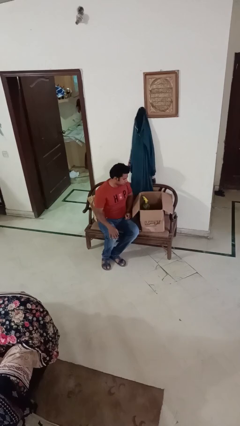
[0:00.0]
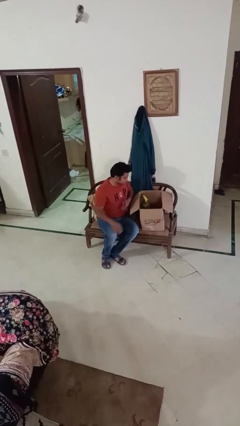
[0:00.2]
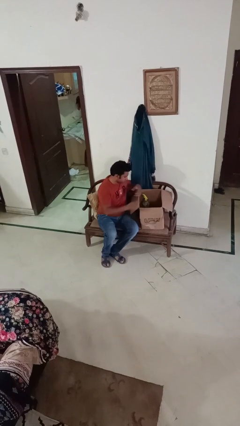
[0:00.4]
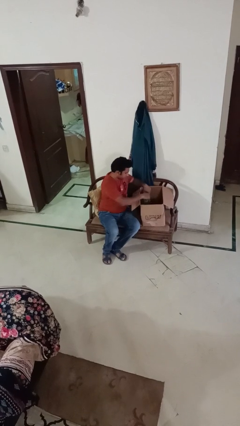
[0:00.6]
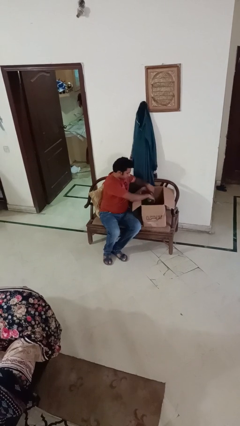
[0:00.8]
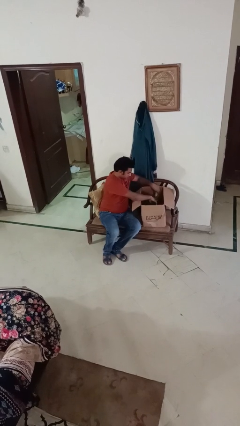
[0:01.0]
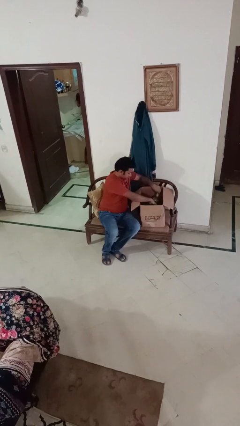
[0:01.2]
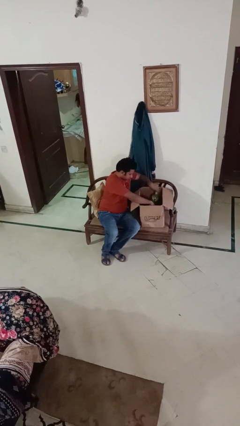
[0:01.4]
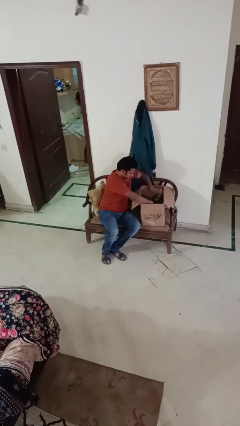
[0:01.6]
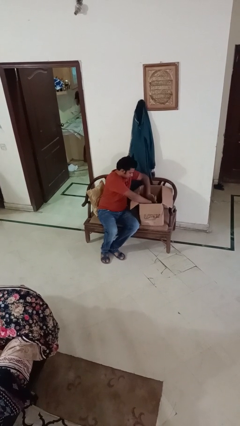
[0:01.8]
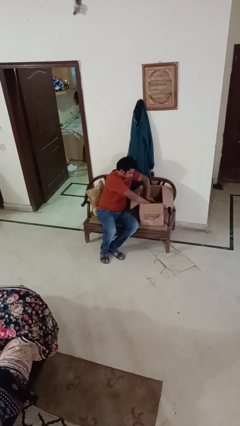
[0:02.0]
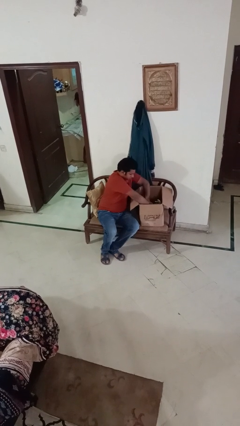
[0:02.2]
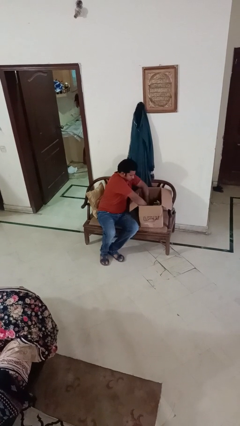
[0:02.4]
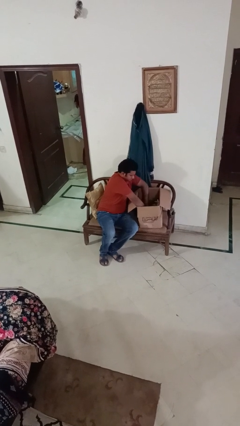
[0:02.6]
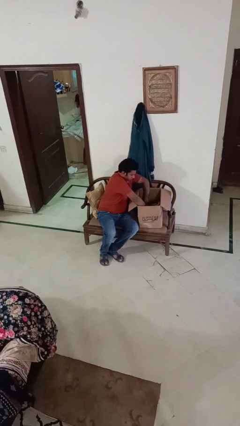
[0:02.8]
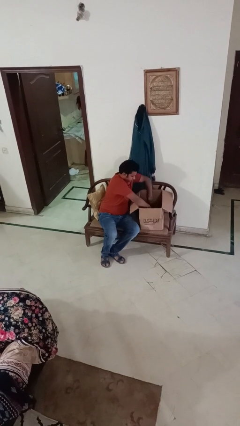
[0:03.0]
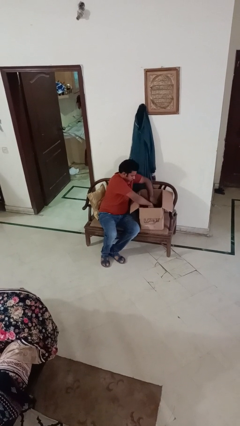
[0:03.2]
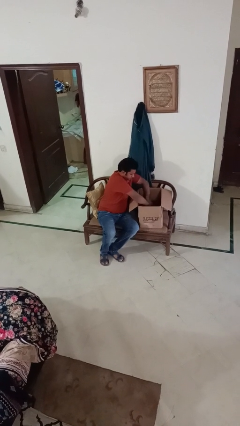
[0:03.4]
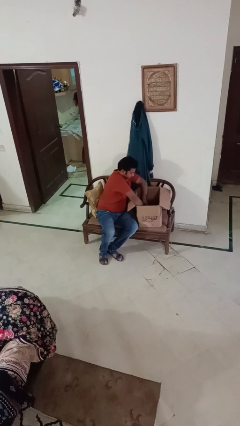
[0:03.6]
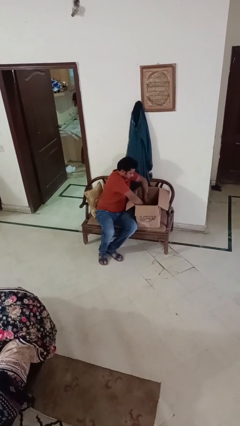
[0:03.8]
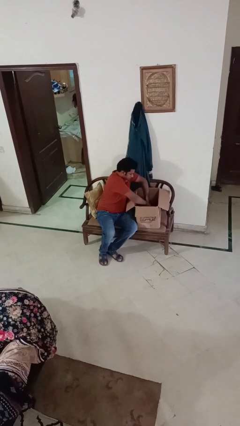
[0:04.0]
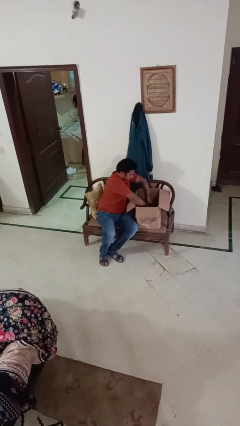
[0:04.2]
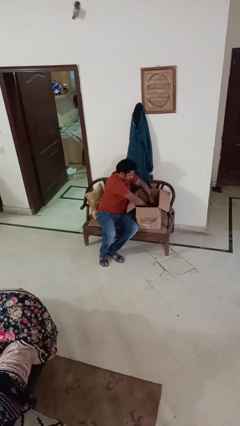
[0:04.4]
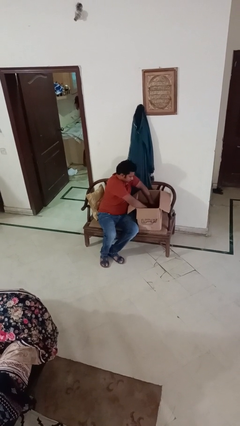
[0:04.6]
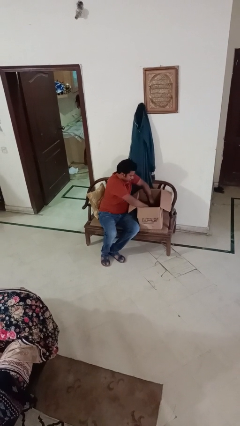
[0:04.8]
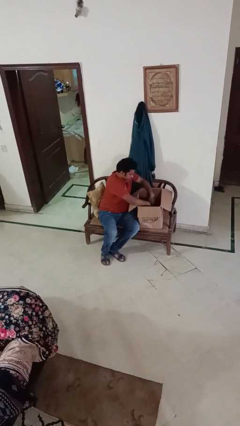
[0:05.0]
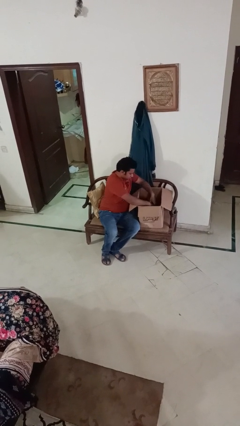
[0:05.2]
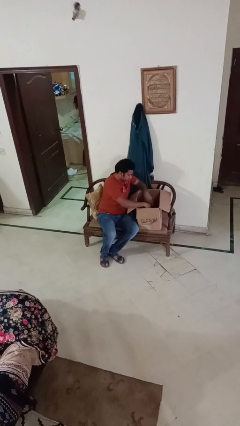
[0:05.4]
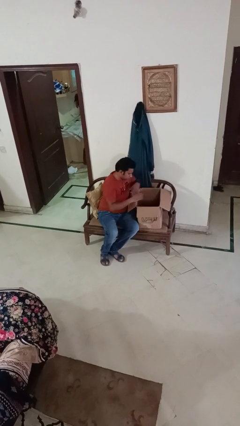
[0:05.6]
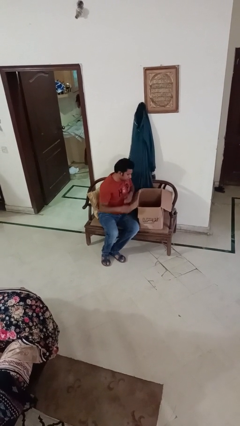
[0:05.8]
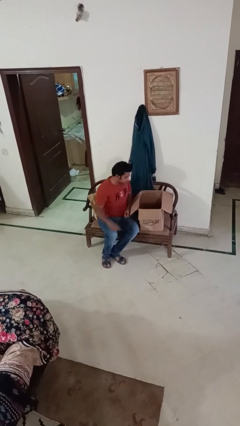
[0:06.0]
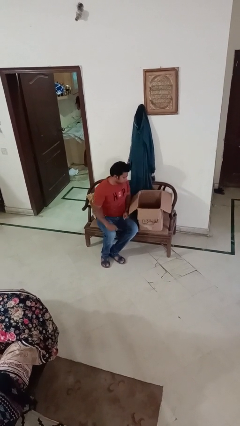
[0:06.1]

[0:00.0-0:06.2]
person searches in box

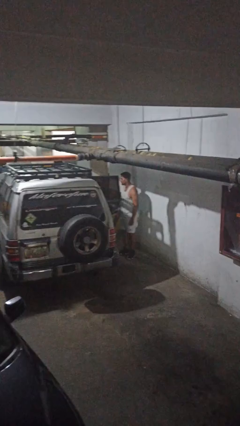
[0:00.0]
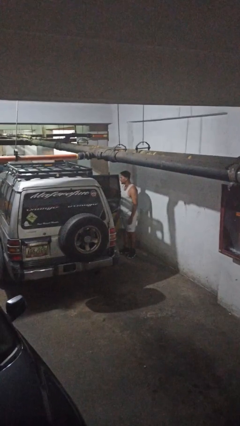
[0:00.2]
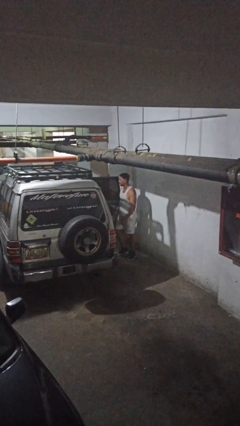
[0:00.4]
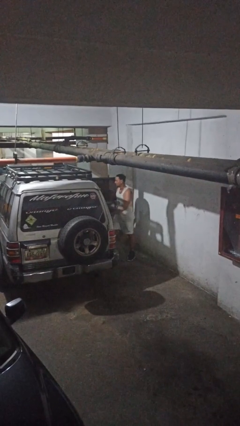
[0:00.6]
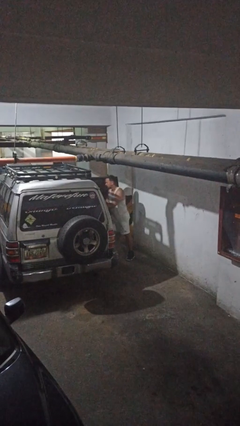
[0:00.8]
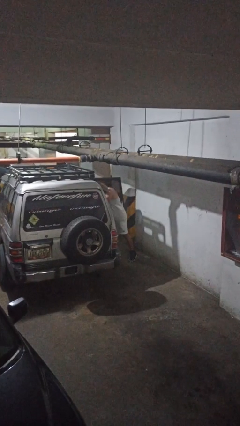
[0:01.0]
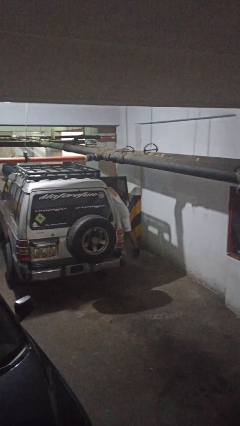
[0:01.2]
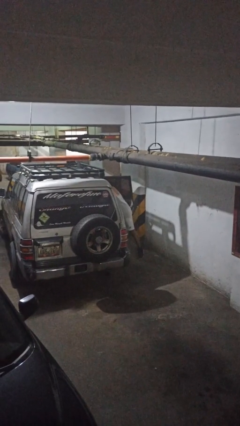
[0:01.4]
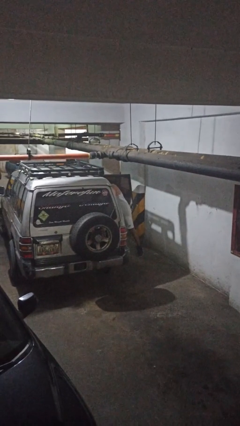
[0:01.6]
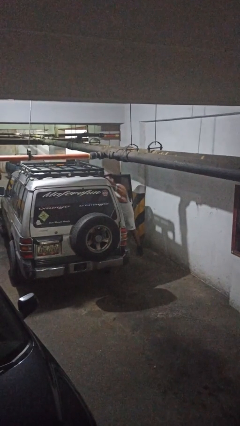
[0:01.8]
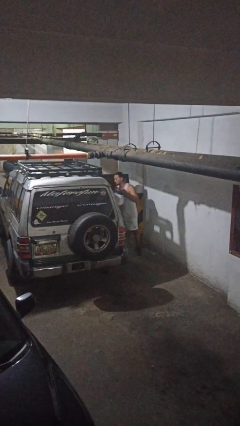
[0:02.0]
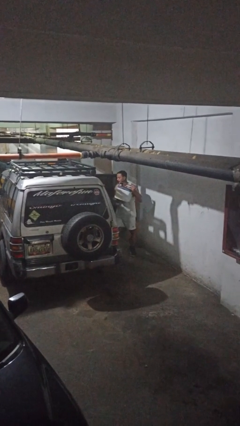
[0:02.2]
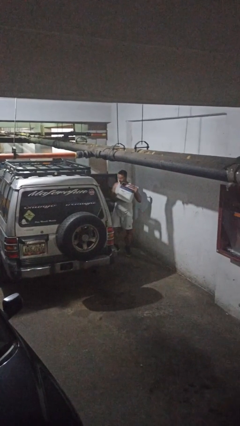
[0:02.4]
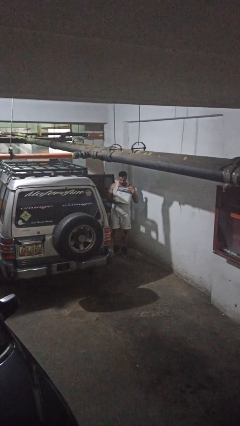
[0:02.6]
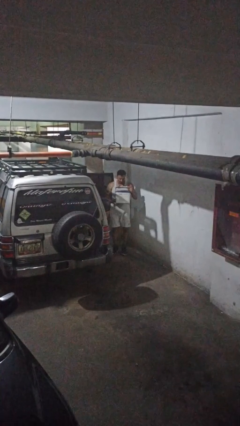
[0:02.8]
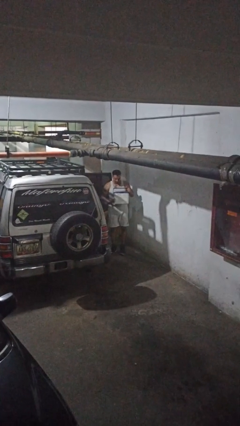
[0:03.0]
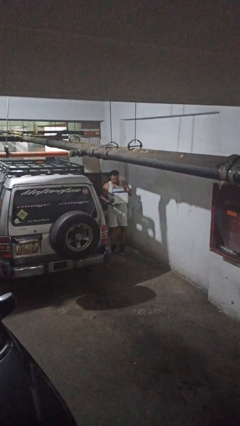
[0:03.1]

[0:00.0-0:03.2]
person unloads car

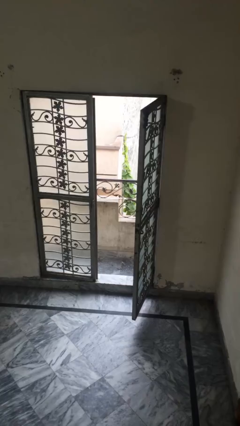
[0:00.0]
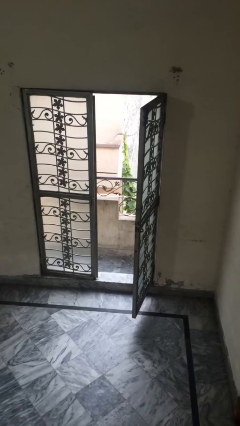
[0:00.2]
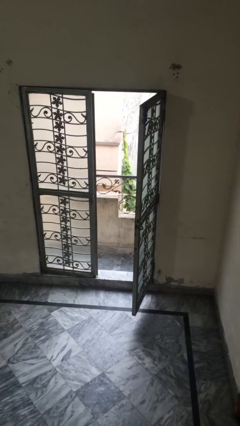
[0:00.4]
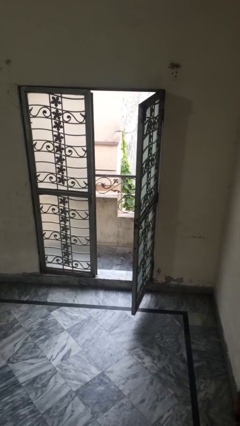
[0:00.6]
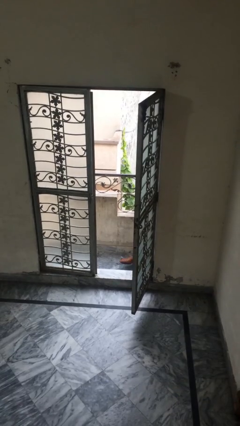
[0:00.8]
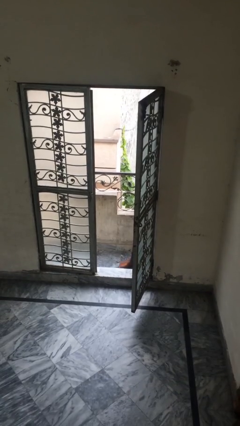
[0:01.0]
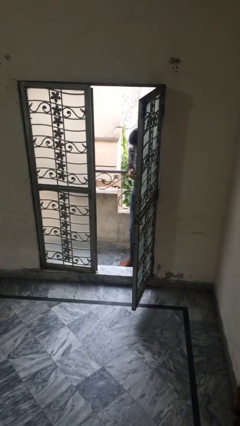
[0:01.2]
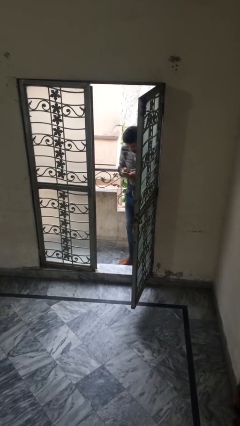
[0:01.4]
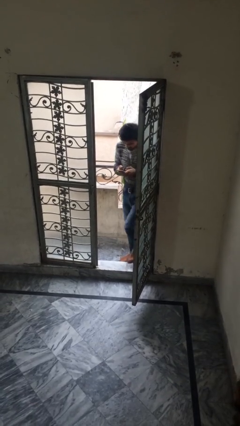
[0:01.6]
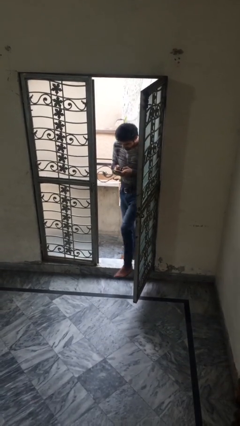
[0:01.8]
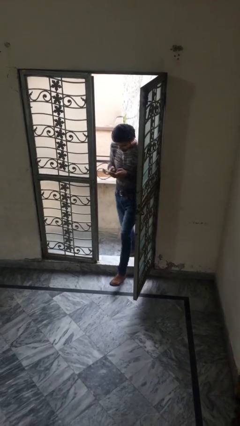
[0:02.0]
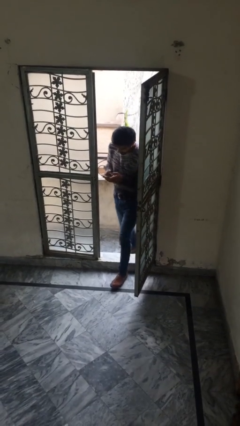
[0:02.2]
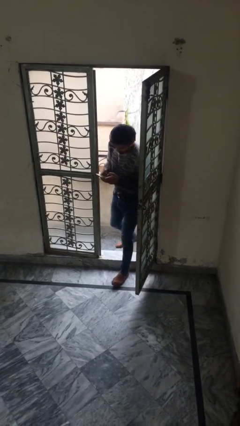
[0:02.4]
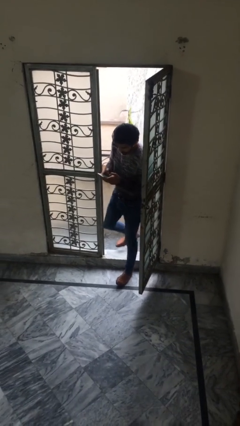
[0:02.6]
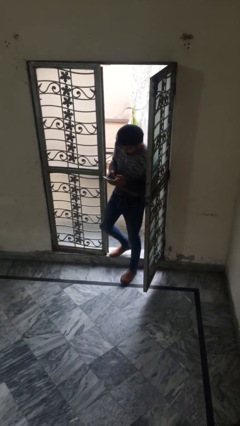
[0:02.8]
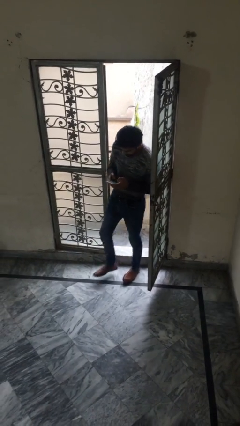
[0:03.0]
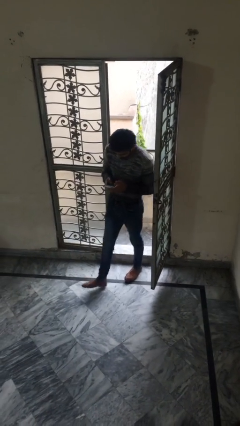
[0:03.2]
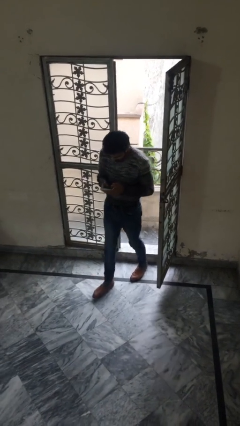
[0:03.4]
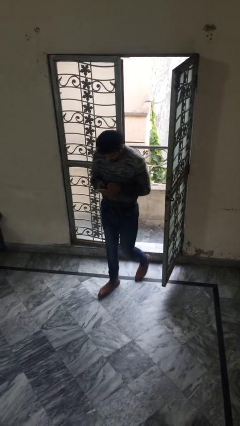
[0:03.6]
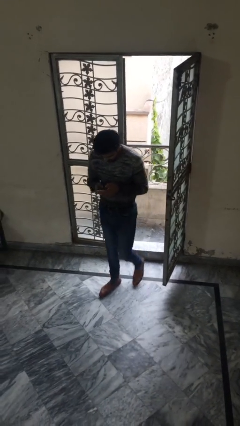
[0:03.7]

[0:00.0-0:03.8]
person enters scene through structure

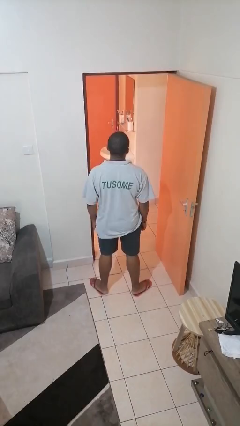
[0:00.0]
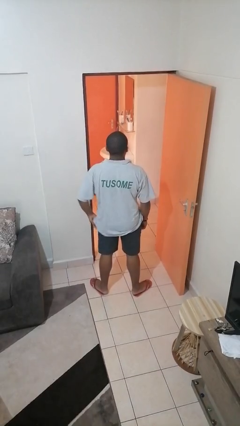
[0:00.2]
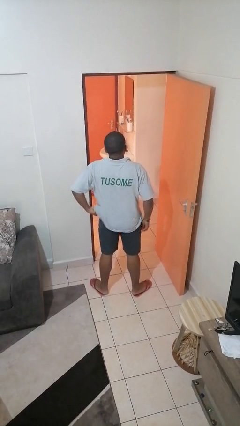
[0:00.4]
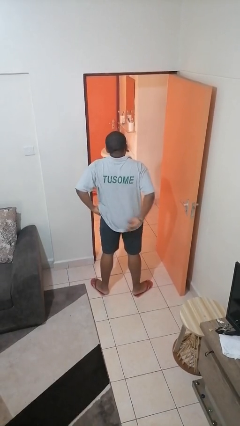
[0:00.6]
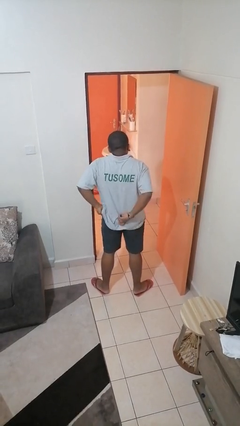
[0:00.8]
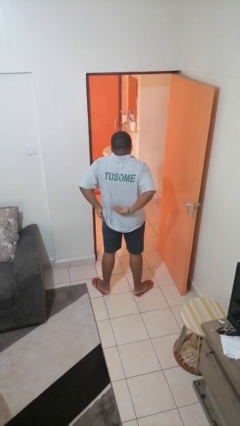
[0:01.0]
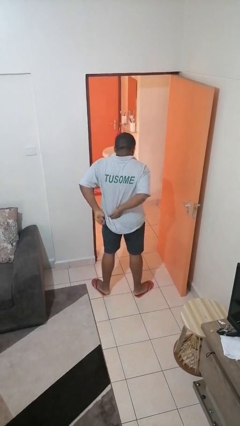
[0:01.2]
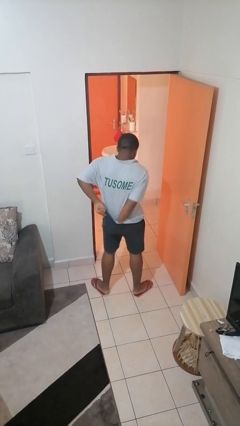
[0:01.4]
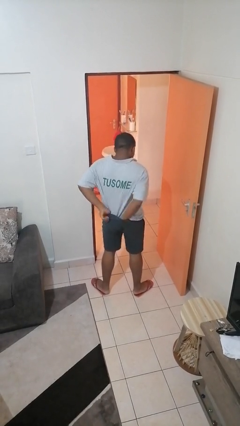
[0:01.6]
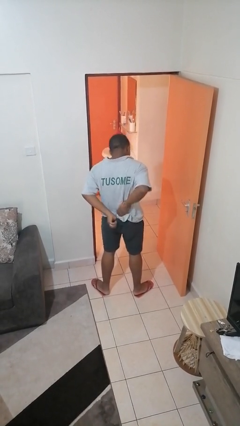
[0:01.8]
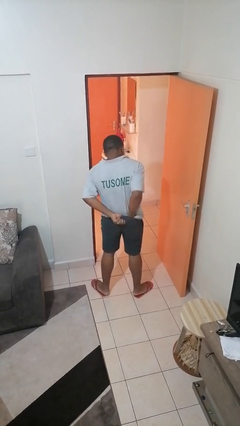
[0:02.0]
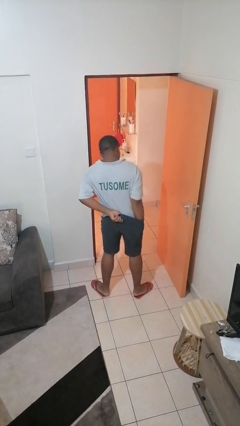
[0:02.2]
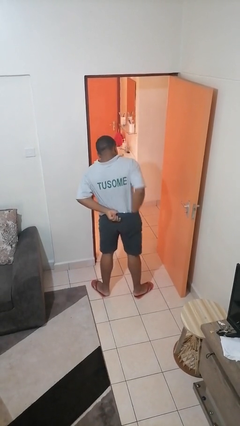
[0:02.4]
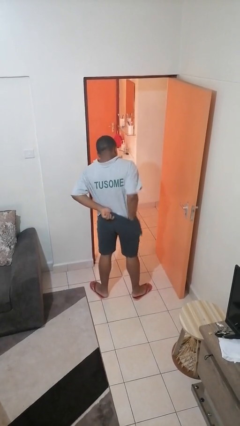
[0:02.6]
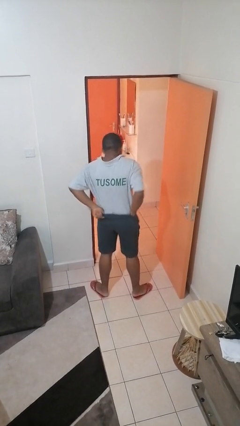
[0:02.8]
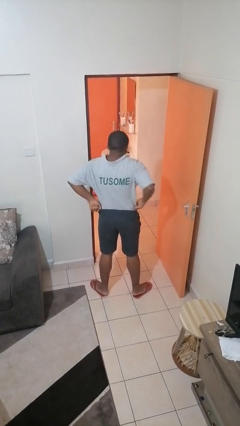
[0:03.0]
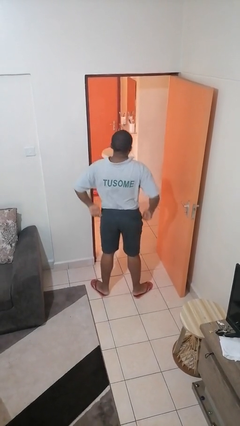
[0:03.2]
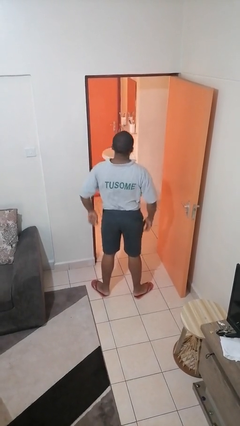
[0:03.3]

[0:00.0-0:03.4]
person tucks in shirt

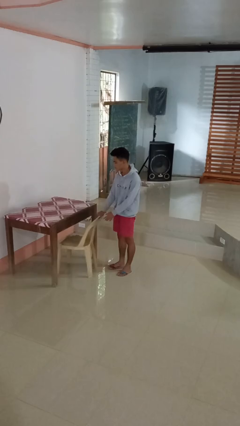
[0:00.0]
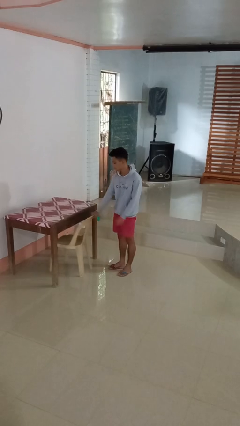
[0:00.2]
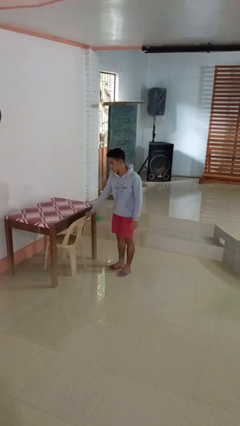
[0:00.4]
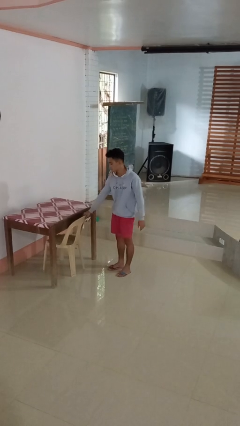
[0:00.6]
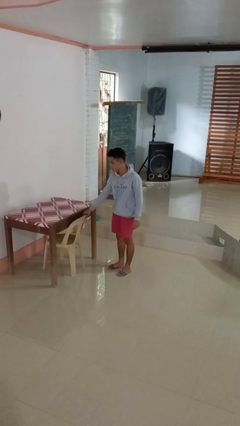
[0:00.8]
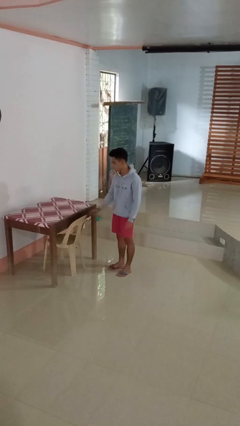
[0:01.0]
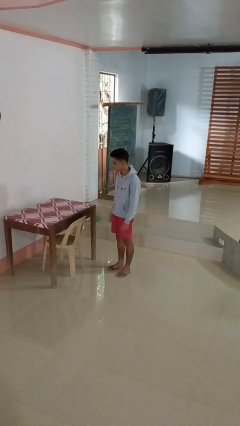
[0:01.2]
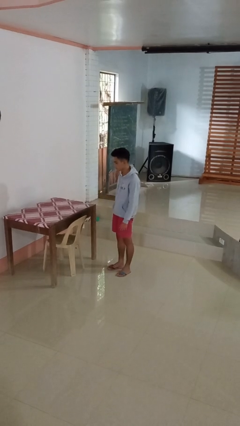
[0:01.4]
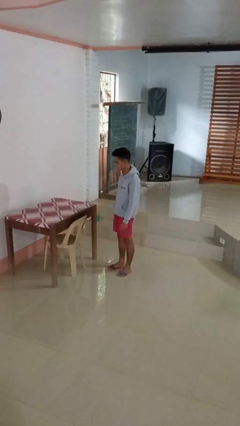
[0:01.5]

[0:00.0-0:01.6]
person pushes in chair
